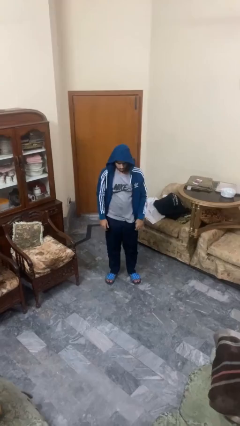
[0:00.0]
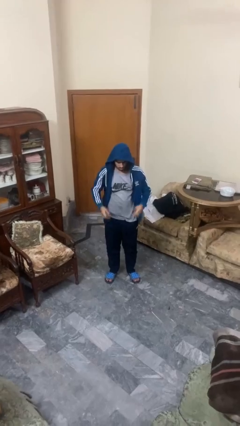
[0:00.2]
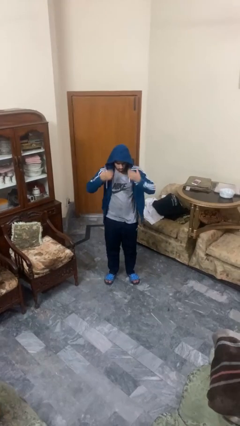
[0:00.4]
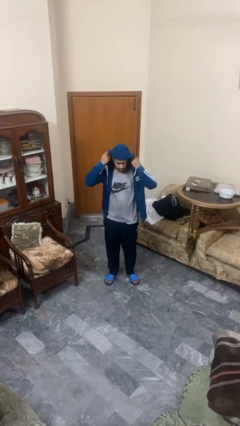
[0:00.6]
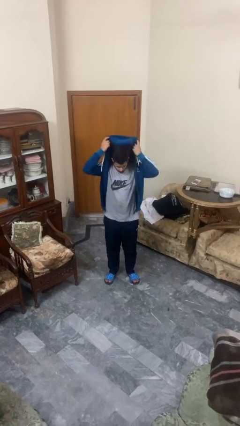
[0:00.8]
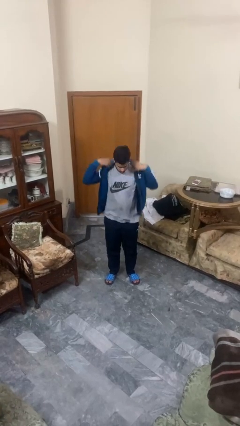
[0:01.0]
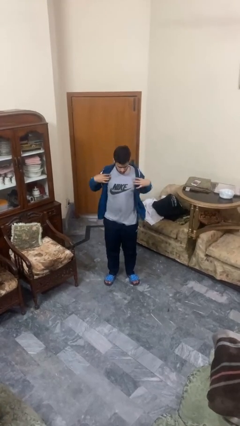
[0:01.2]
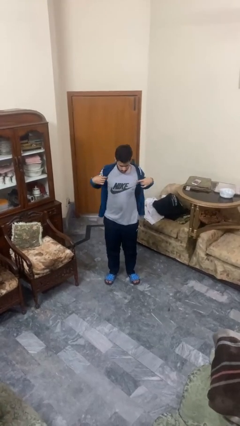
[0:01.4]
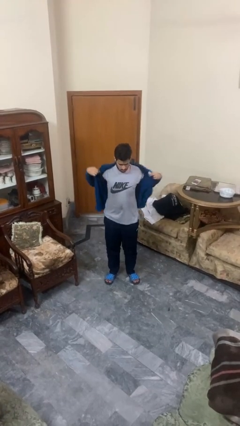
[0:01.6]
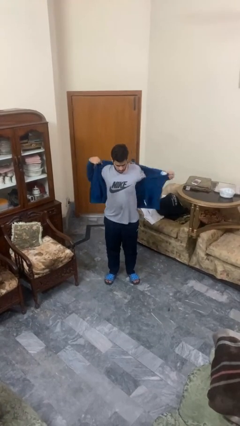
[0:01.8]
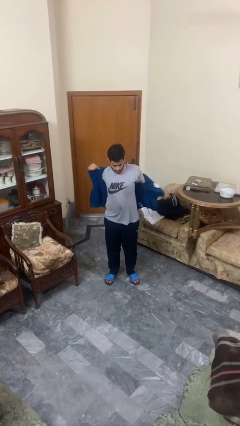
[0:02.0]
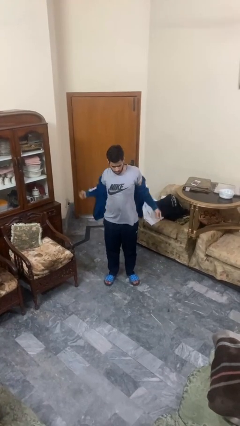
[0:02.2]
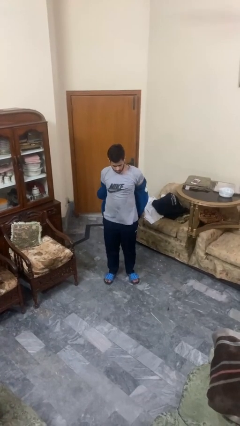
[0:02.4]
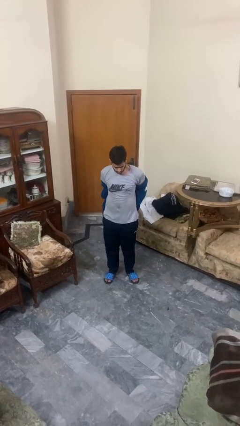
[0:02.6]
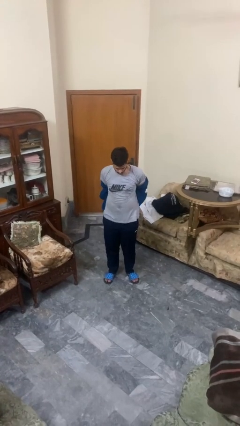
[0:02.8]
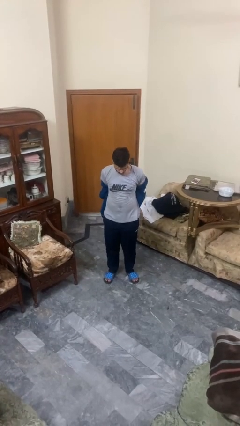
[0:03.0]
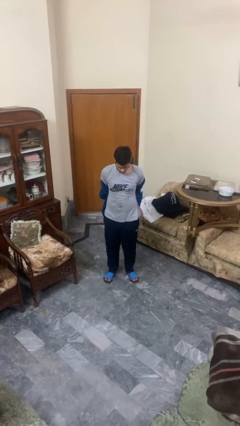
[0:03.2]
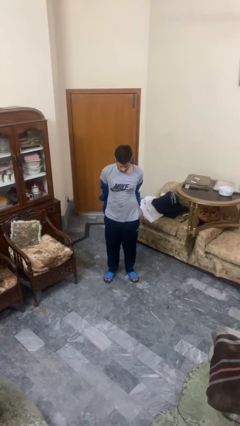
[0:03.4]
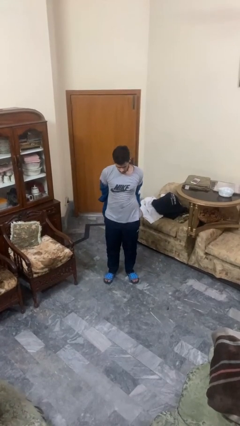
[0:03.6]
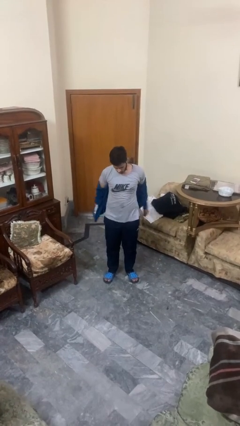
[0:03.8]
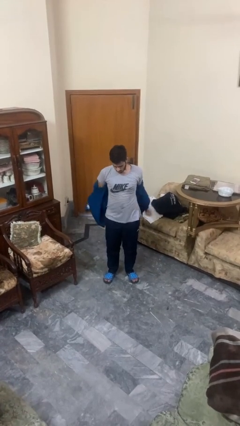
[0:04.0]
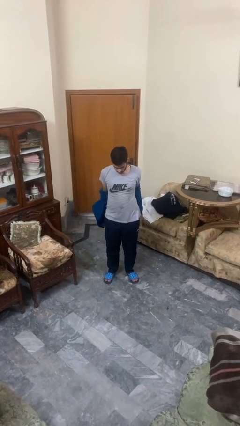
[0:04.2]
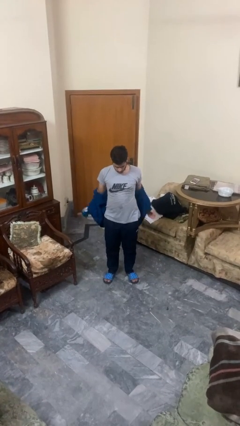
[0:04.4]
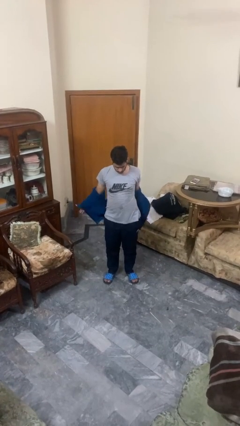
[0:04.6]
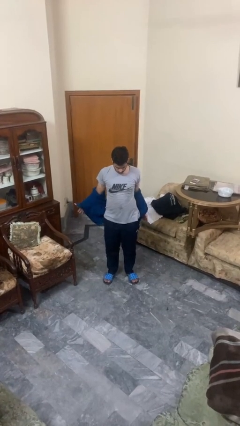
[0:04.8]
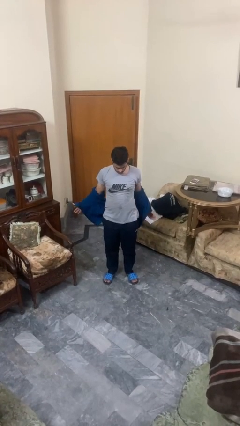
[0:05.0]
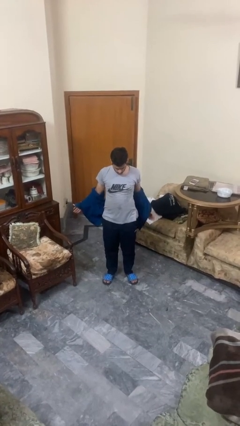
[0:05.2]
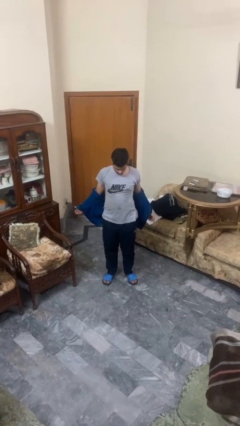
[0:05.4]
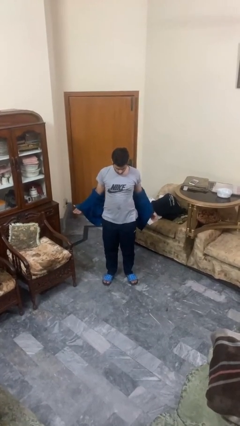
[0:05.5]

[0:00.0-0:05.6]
person takes off hoodie

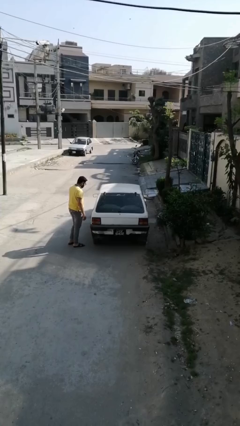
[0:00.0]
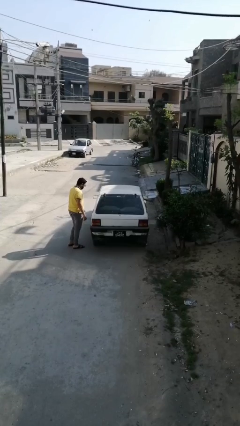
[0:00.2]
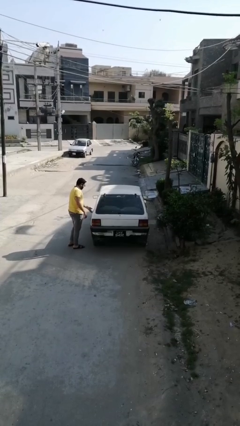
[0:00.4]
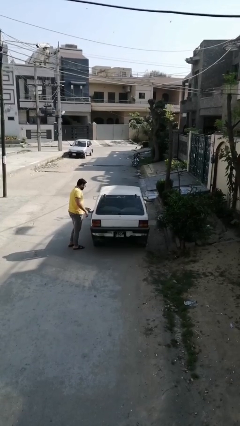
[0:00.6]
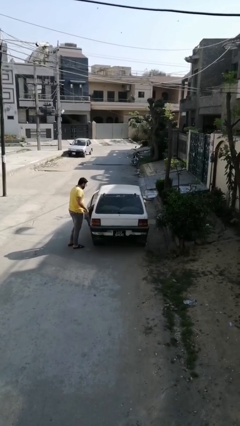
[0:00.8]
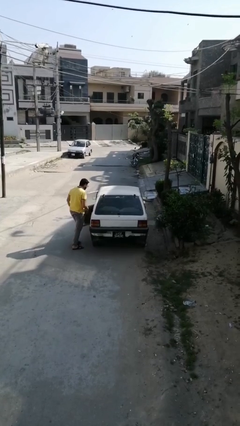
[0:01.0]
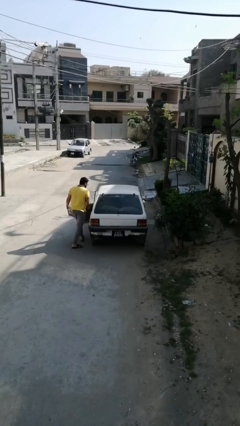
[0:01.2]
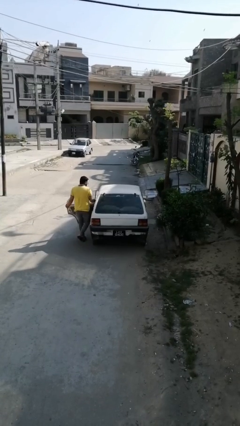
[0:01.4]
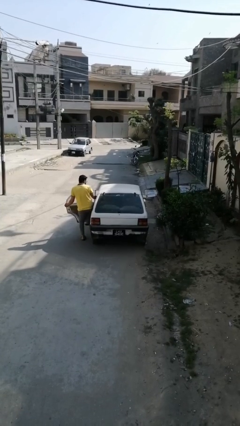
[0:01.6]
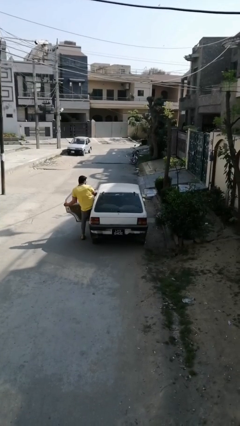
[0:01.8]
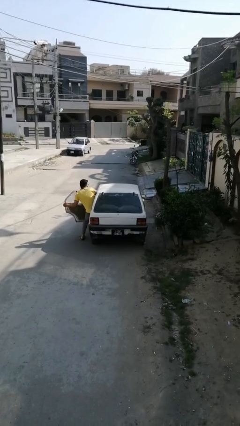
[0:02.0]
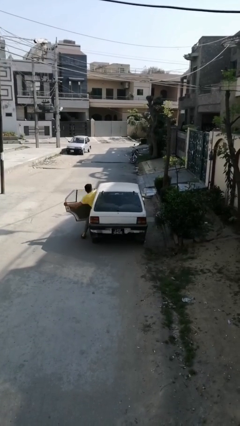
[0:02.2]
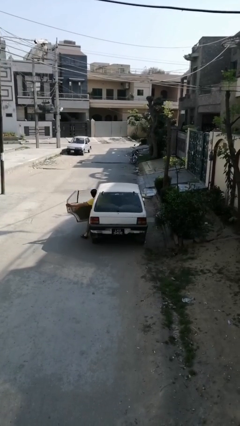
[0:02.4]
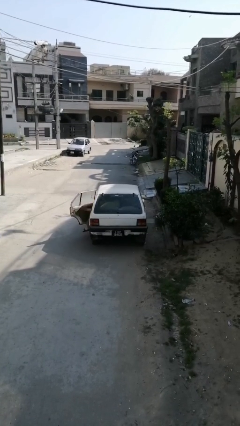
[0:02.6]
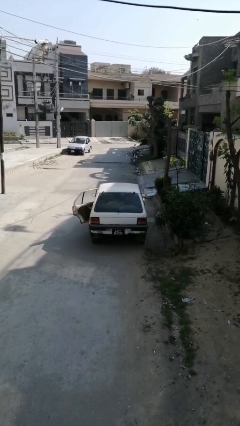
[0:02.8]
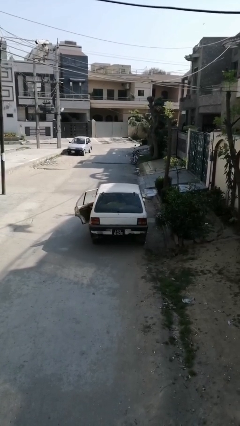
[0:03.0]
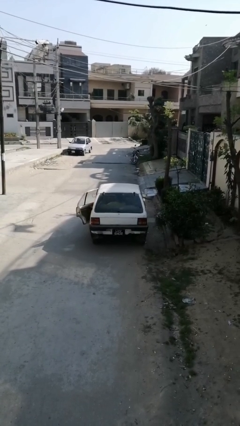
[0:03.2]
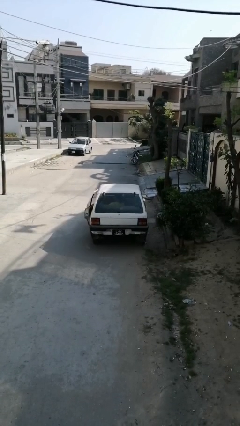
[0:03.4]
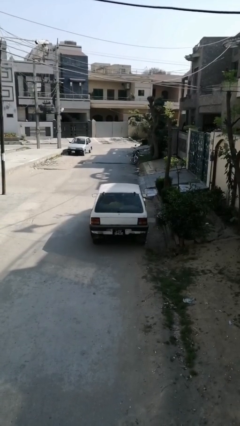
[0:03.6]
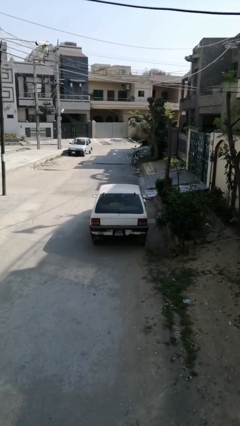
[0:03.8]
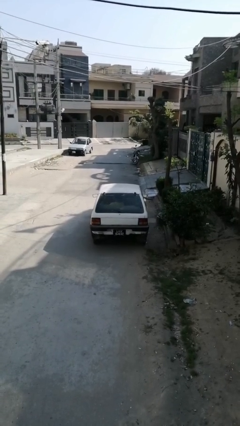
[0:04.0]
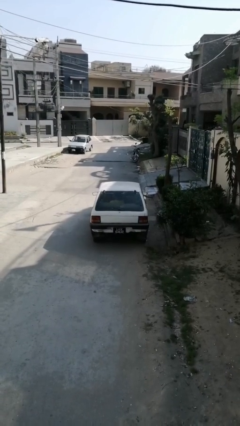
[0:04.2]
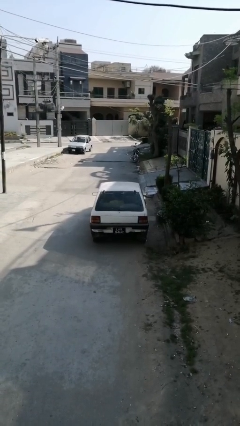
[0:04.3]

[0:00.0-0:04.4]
car picks up person

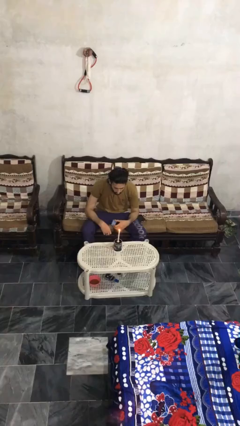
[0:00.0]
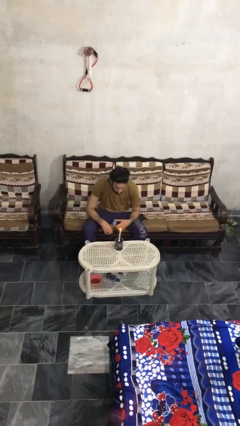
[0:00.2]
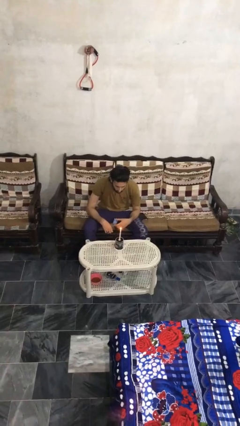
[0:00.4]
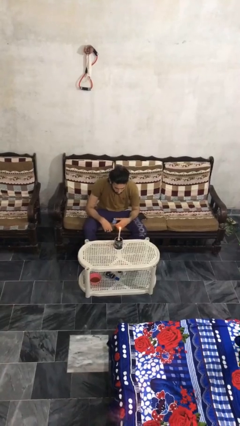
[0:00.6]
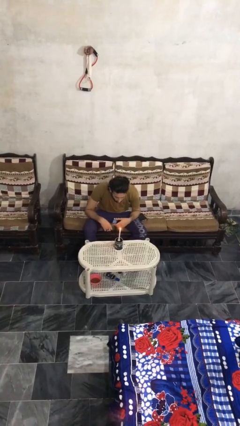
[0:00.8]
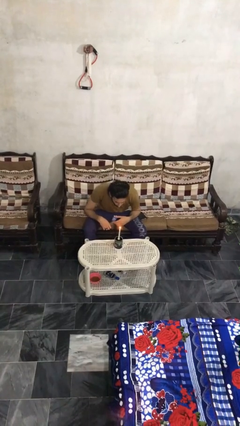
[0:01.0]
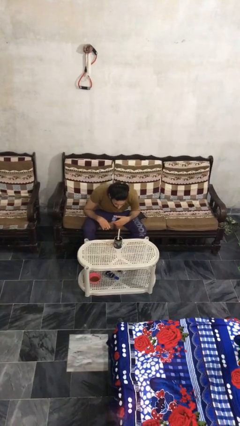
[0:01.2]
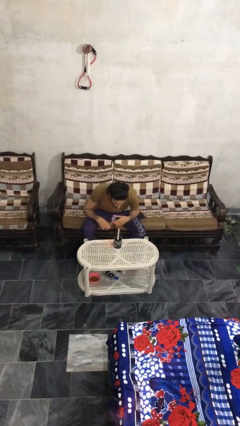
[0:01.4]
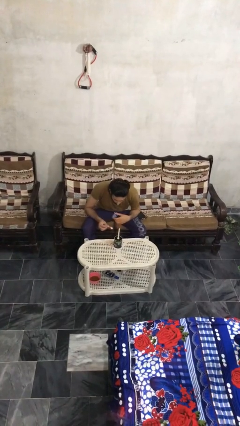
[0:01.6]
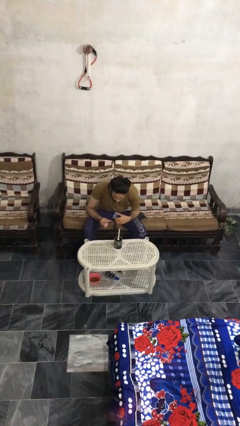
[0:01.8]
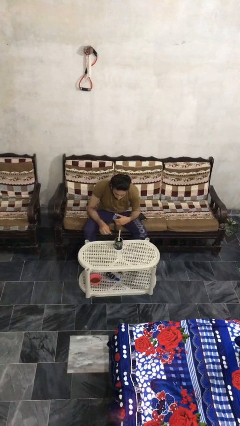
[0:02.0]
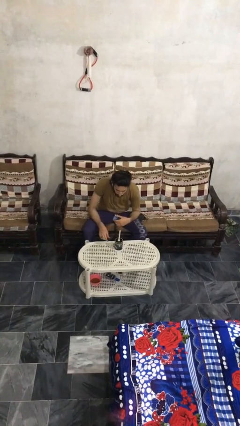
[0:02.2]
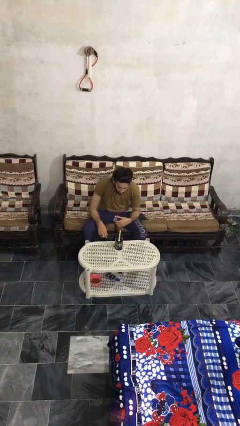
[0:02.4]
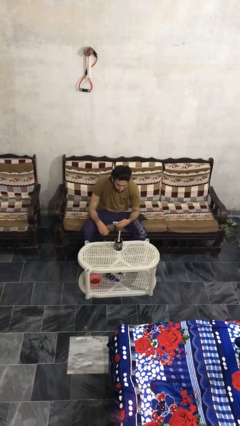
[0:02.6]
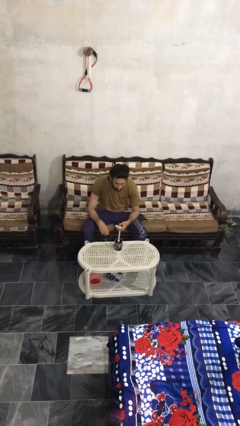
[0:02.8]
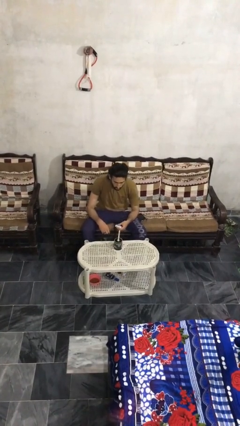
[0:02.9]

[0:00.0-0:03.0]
person extinguishes candle

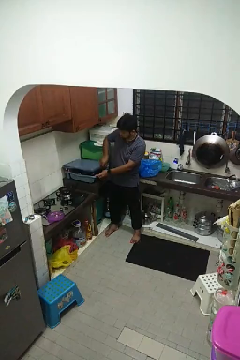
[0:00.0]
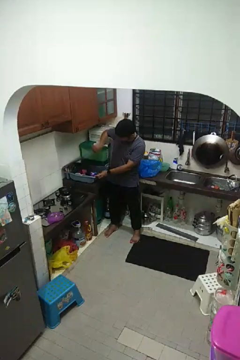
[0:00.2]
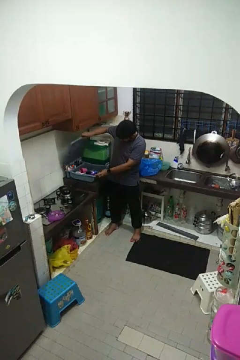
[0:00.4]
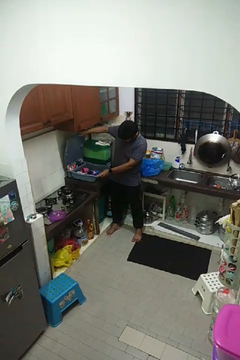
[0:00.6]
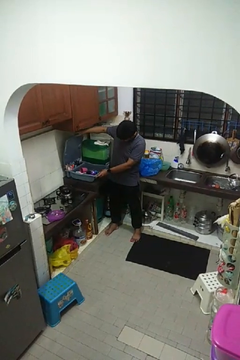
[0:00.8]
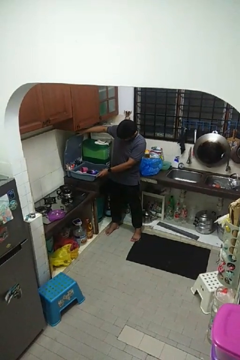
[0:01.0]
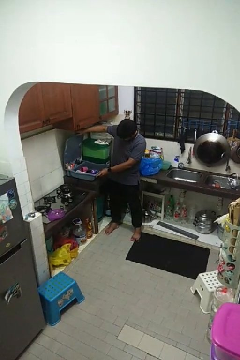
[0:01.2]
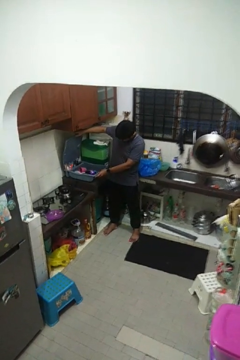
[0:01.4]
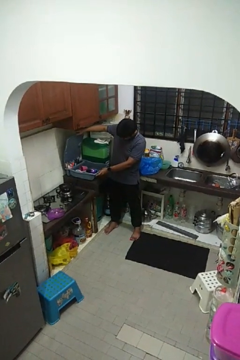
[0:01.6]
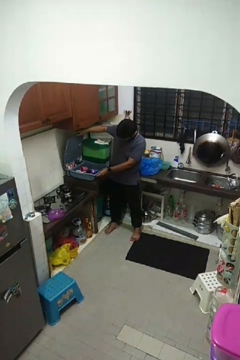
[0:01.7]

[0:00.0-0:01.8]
person opens dishwasher

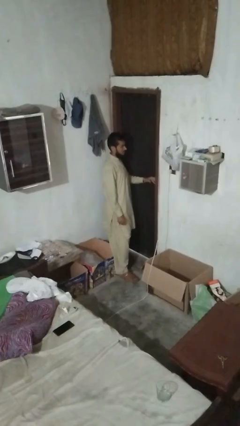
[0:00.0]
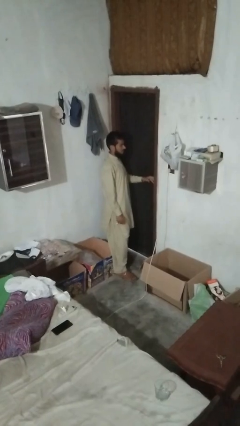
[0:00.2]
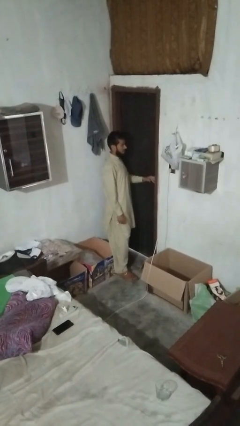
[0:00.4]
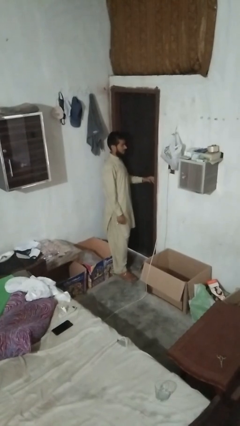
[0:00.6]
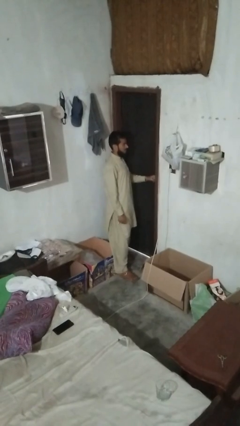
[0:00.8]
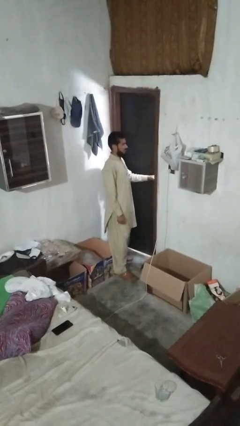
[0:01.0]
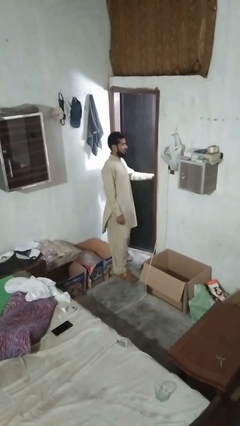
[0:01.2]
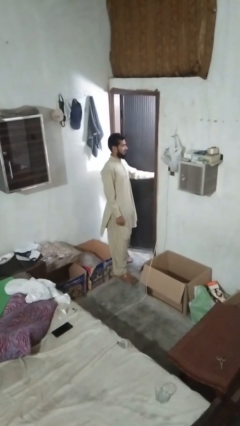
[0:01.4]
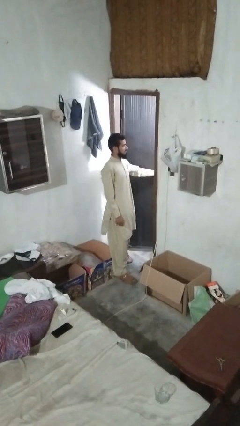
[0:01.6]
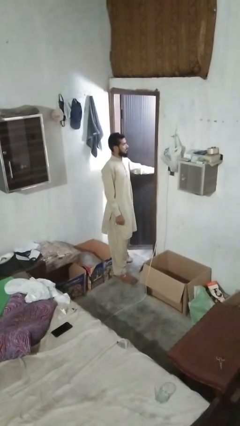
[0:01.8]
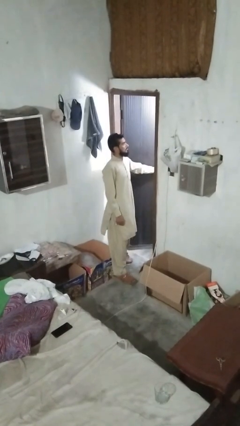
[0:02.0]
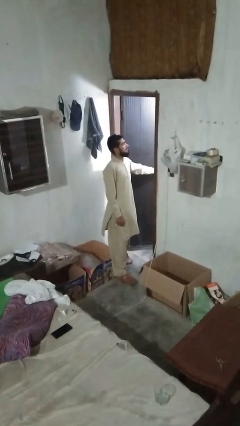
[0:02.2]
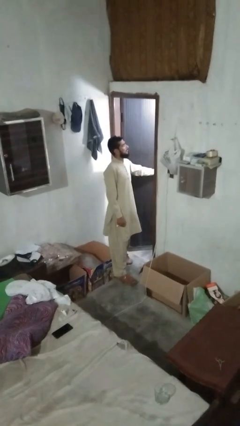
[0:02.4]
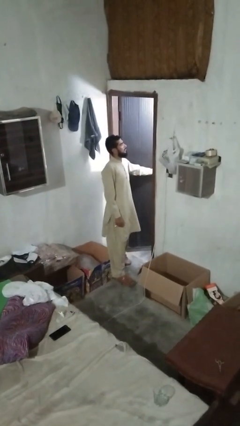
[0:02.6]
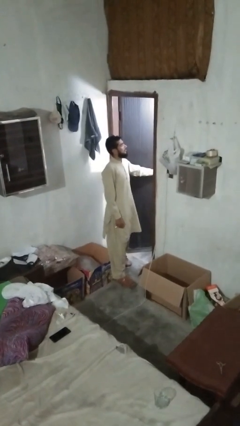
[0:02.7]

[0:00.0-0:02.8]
person opens facility door

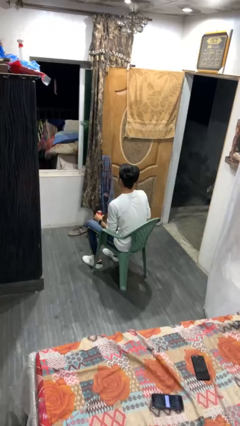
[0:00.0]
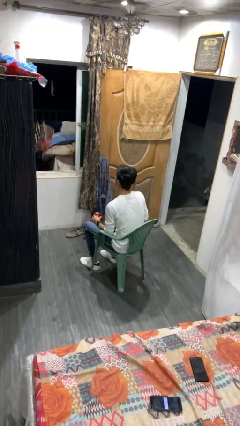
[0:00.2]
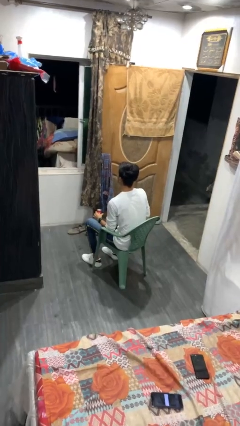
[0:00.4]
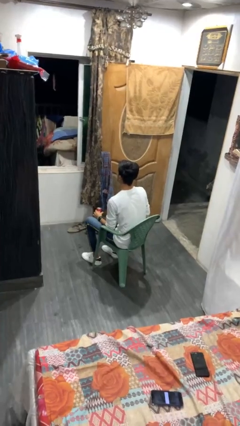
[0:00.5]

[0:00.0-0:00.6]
person opens beverage can
